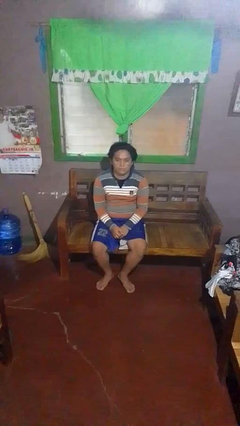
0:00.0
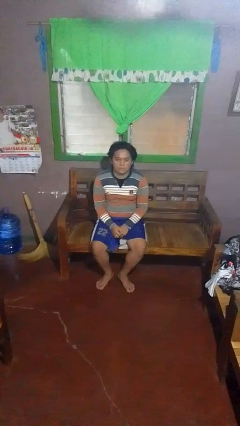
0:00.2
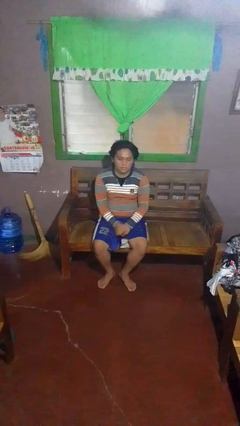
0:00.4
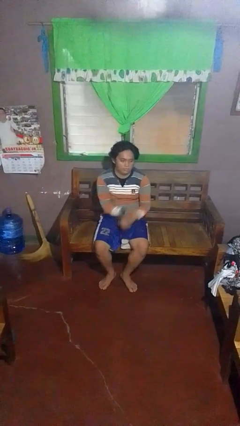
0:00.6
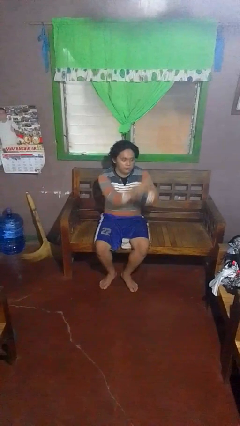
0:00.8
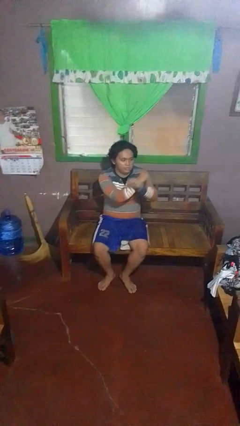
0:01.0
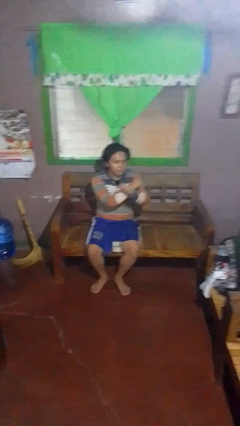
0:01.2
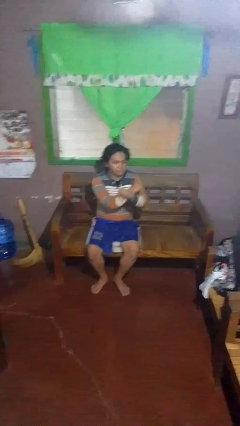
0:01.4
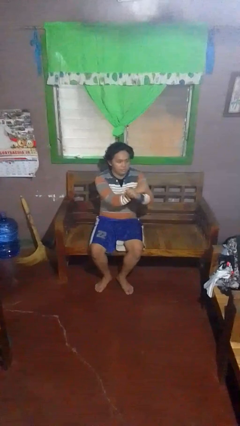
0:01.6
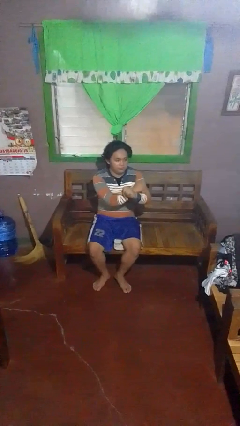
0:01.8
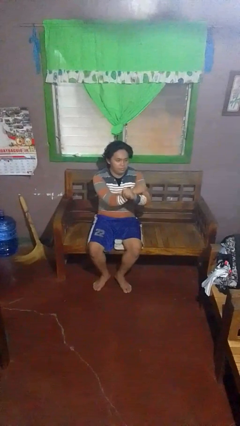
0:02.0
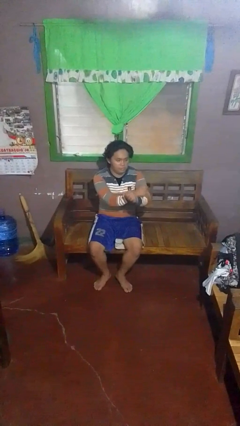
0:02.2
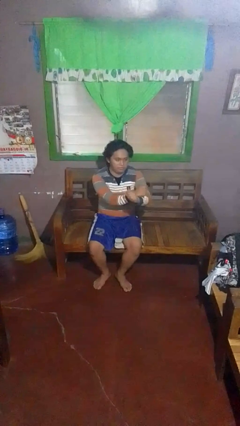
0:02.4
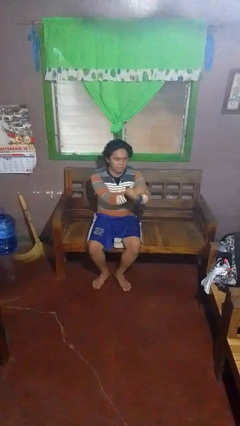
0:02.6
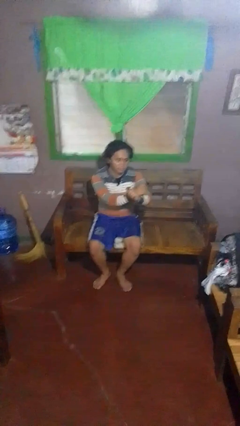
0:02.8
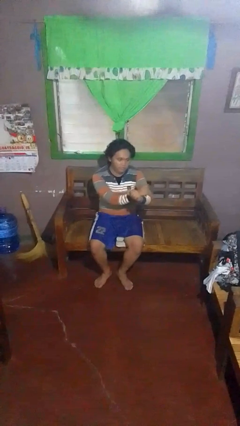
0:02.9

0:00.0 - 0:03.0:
person gestures arms x

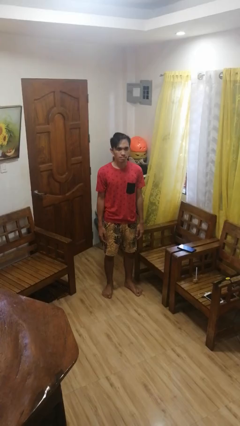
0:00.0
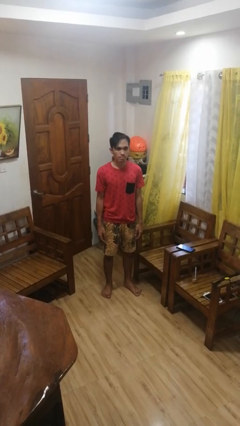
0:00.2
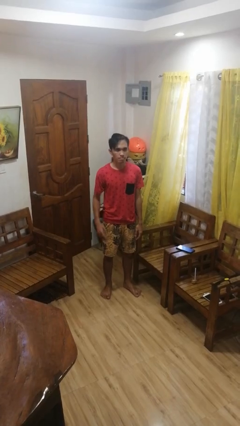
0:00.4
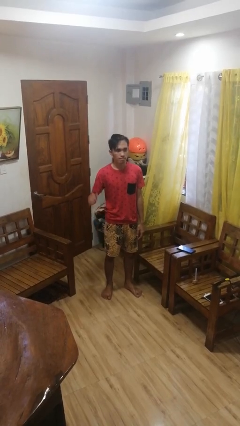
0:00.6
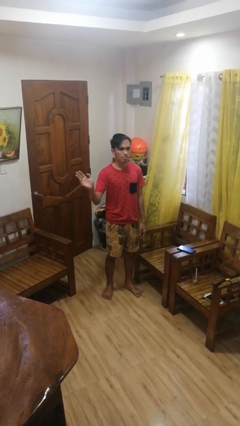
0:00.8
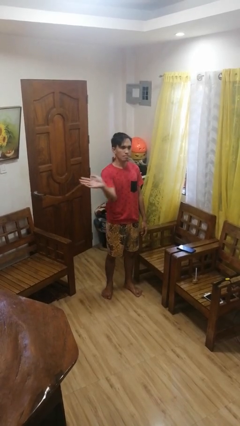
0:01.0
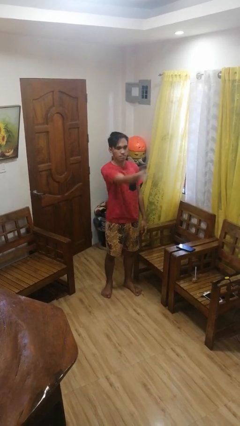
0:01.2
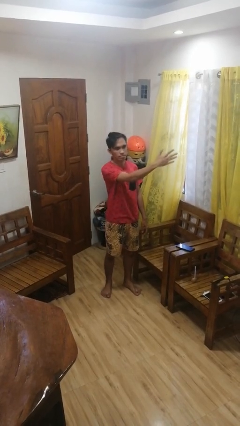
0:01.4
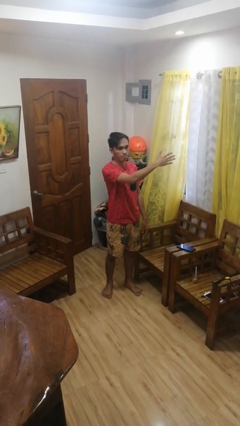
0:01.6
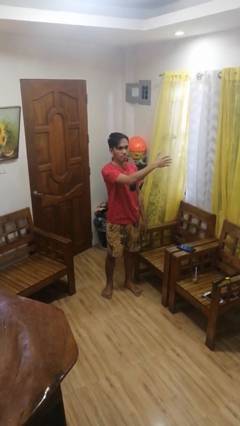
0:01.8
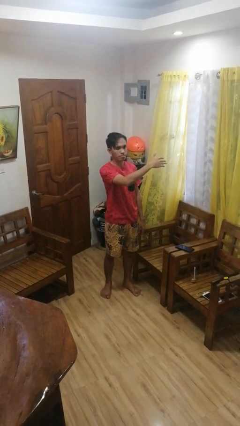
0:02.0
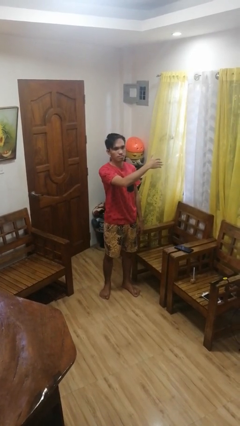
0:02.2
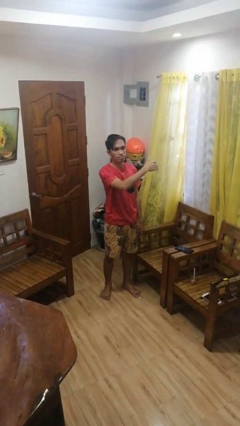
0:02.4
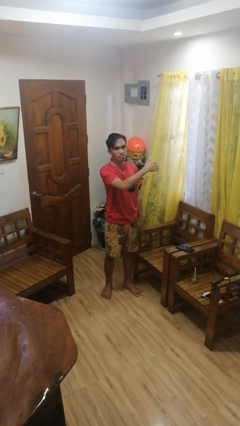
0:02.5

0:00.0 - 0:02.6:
person gestures swipe left

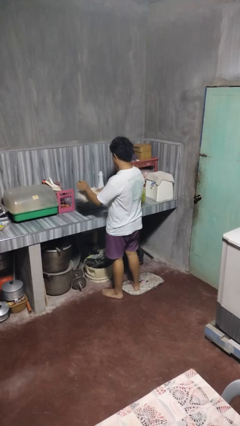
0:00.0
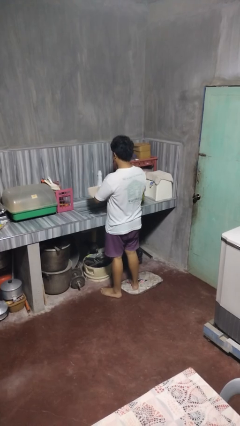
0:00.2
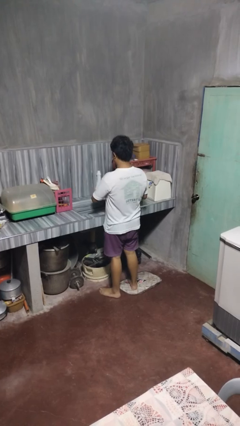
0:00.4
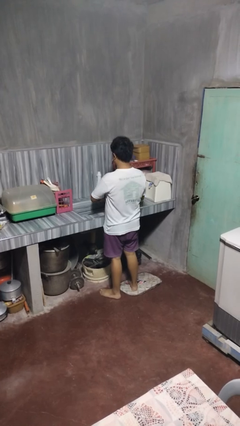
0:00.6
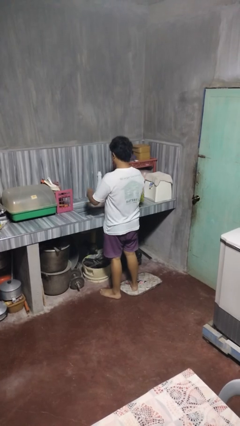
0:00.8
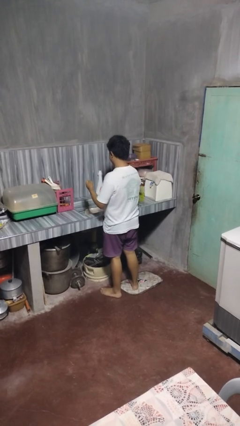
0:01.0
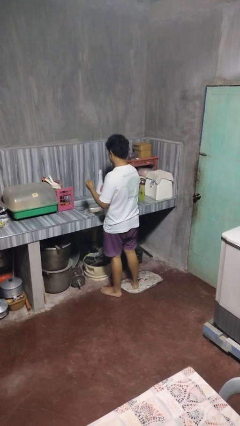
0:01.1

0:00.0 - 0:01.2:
person washes dish

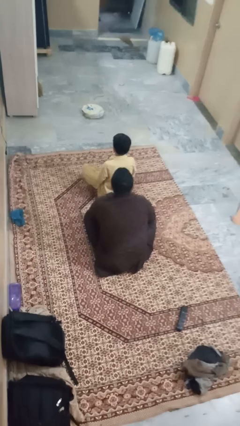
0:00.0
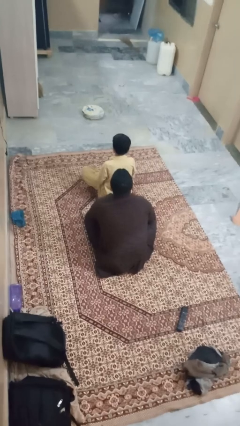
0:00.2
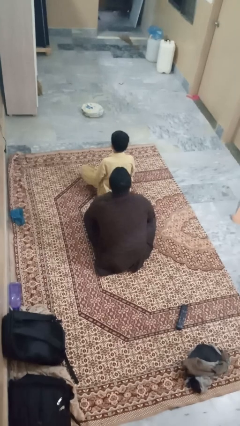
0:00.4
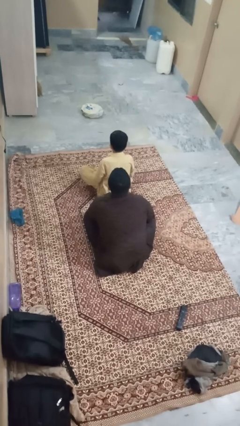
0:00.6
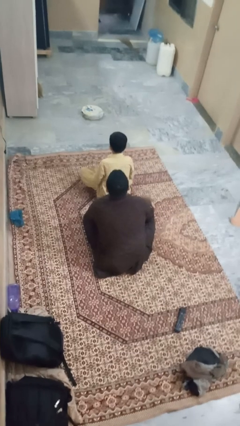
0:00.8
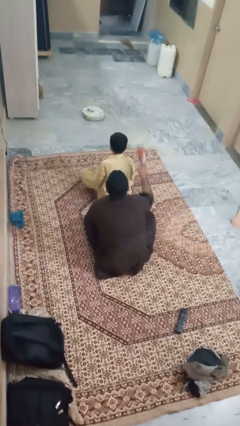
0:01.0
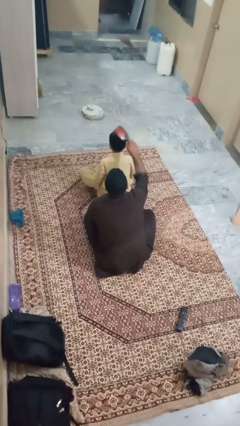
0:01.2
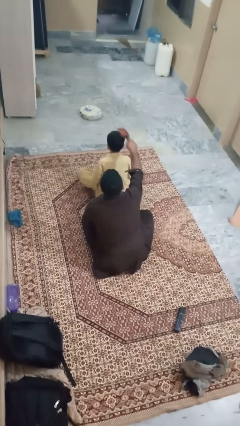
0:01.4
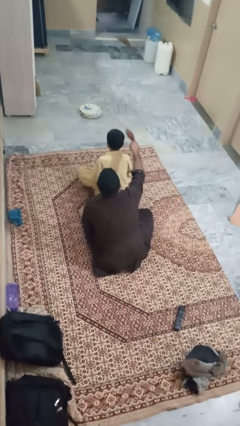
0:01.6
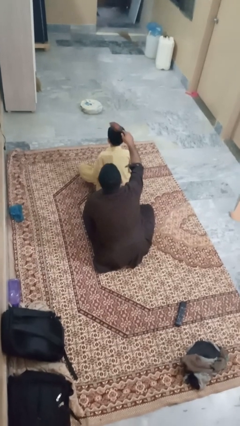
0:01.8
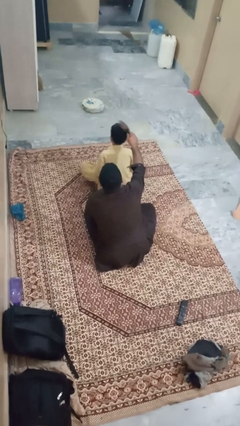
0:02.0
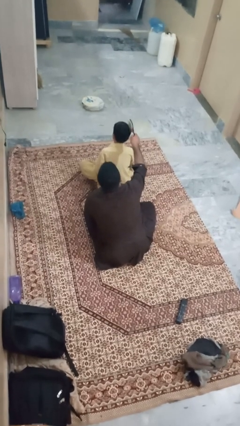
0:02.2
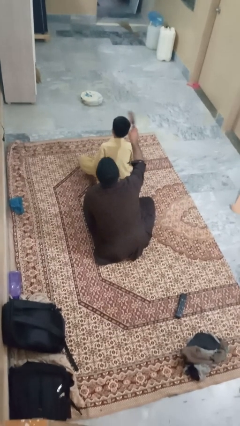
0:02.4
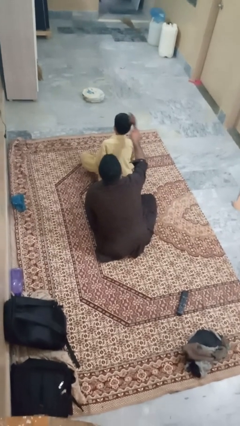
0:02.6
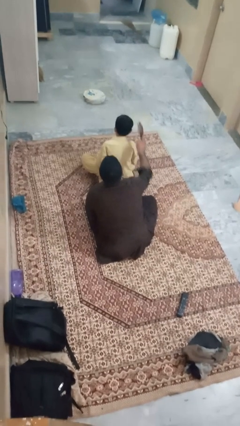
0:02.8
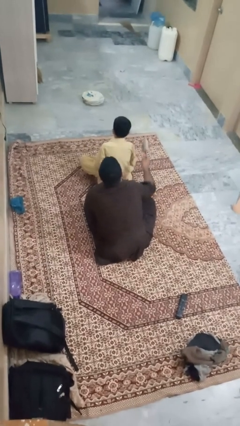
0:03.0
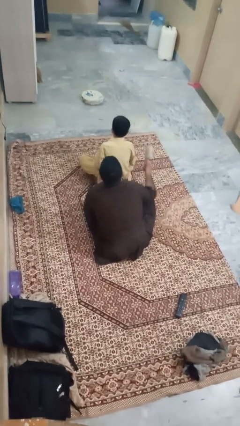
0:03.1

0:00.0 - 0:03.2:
person brushes hair of person

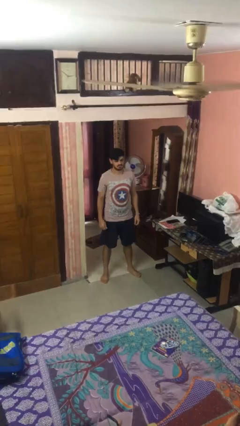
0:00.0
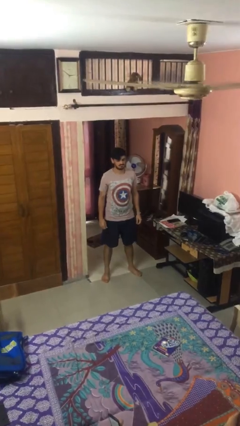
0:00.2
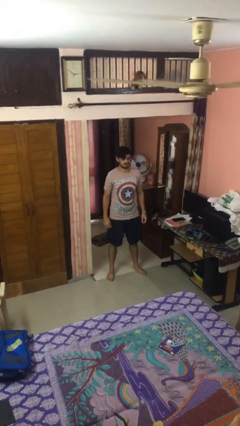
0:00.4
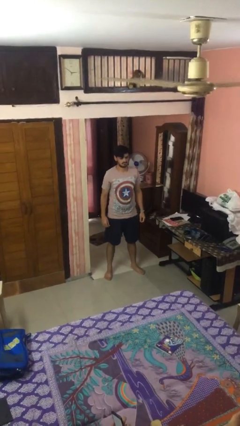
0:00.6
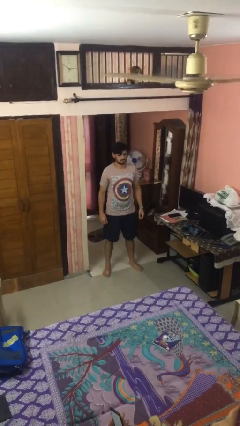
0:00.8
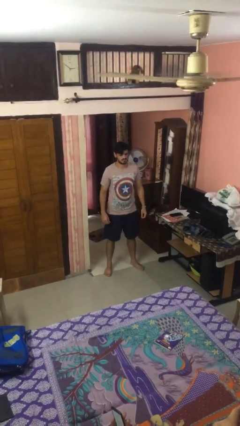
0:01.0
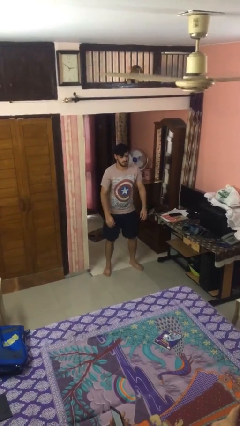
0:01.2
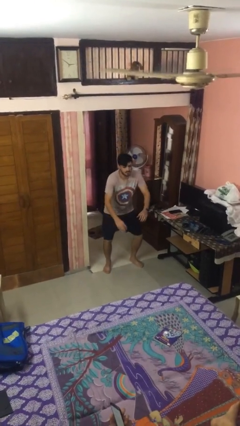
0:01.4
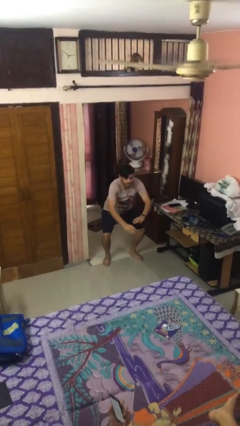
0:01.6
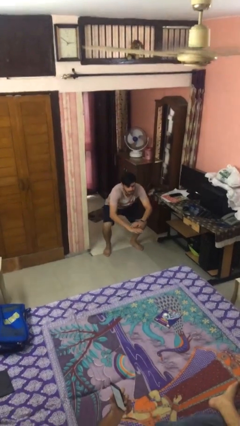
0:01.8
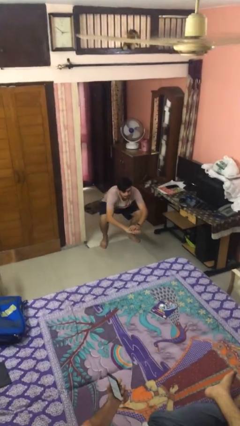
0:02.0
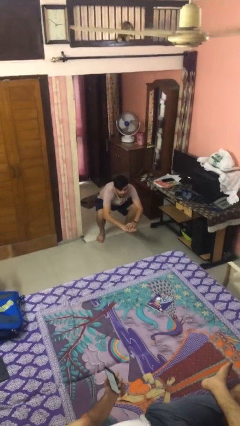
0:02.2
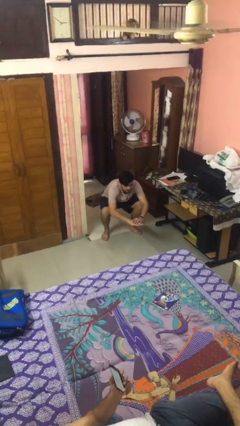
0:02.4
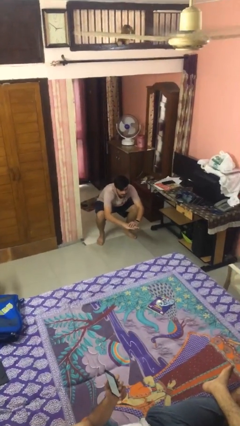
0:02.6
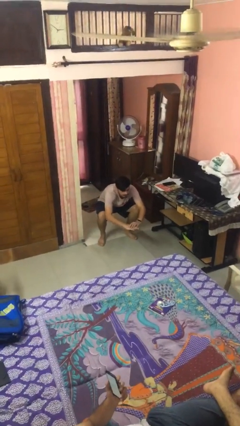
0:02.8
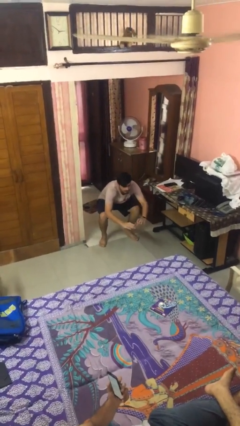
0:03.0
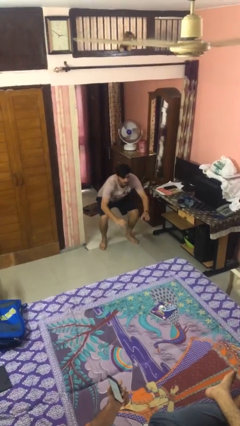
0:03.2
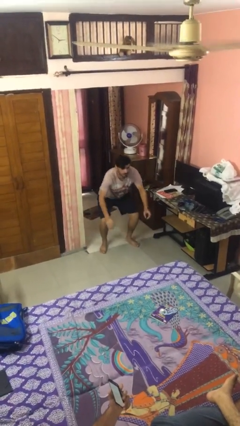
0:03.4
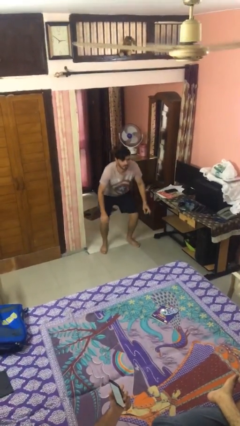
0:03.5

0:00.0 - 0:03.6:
person squats

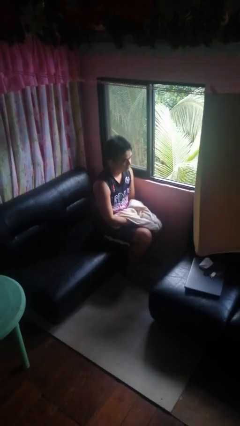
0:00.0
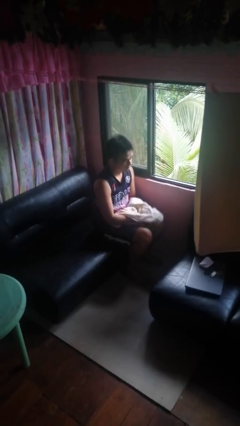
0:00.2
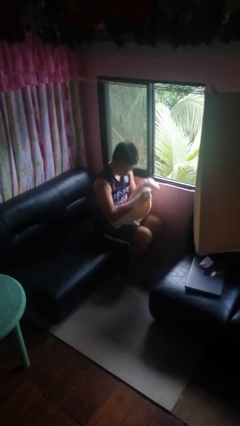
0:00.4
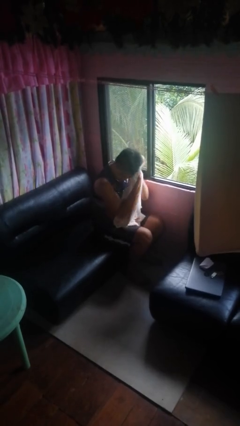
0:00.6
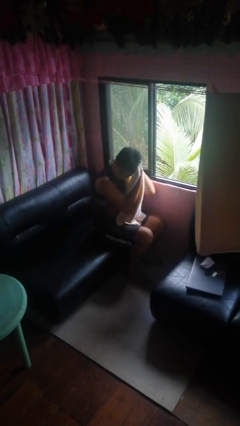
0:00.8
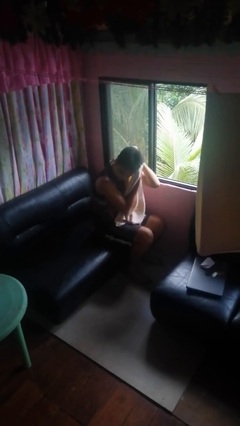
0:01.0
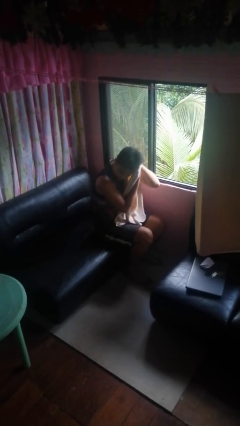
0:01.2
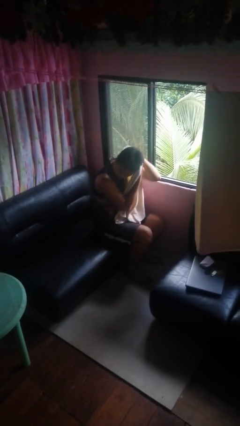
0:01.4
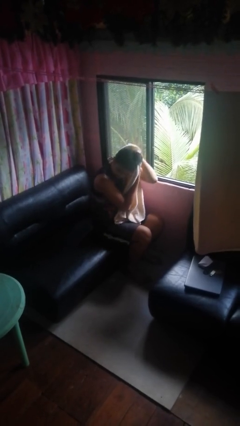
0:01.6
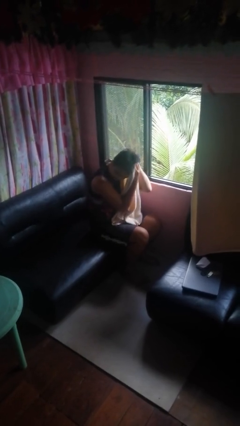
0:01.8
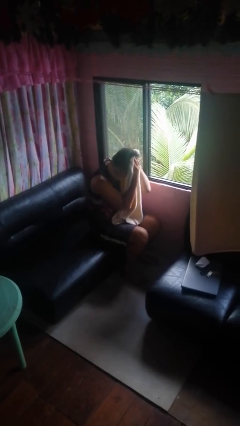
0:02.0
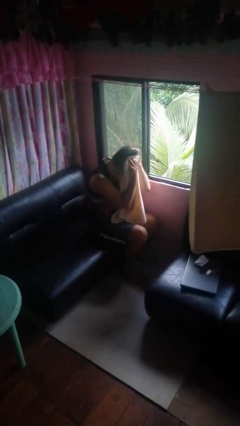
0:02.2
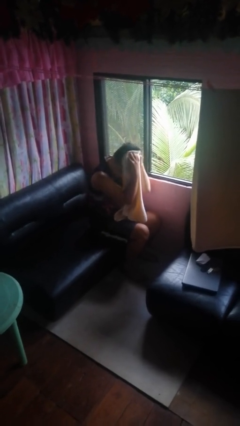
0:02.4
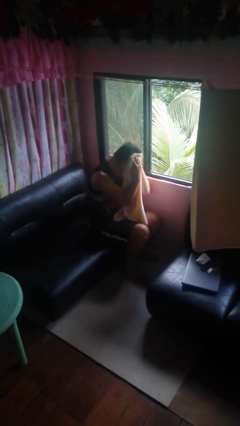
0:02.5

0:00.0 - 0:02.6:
person dries hair with towel

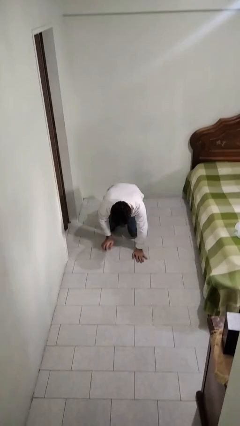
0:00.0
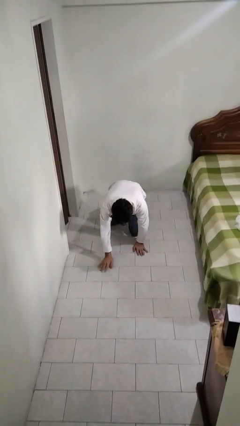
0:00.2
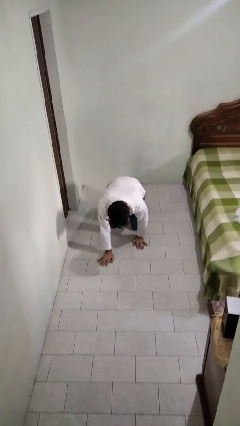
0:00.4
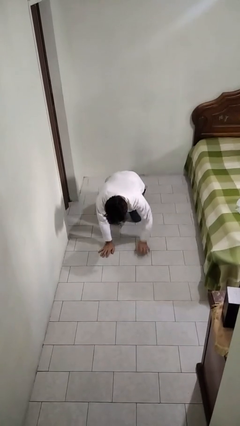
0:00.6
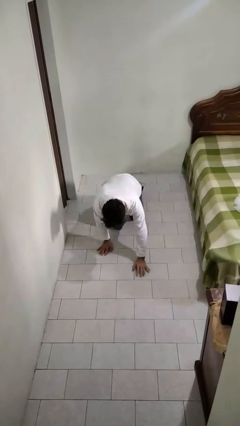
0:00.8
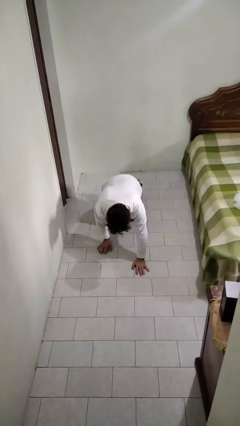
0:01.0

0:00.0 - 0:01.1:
person crawls
